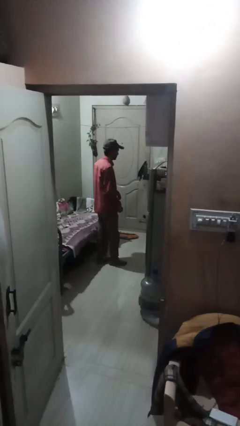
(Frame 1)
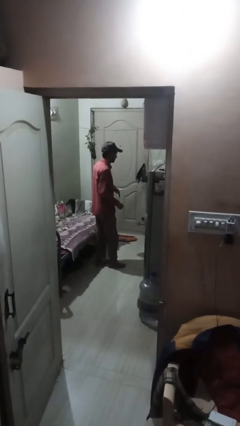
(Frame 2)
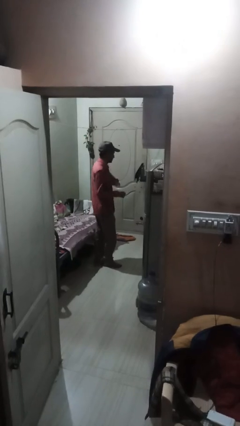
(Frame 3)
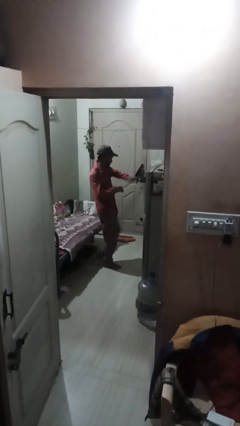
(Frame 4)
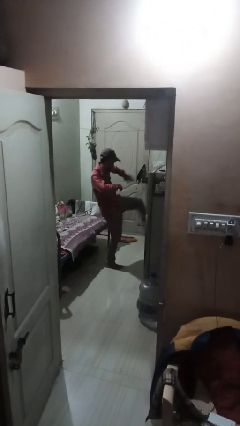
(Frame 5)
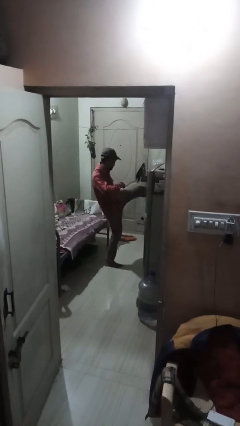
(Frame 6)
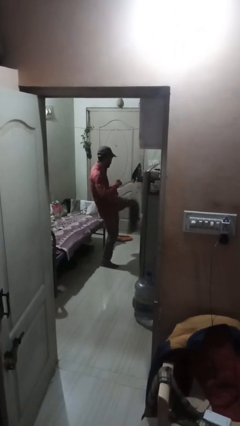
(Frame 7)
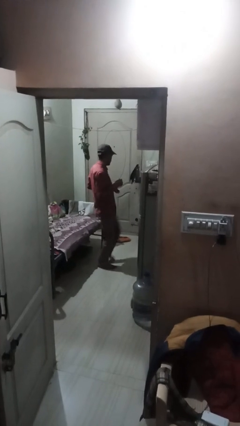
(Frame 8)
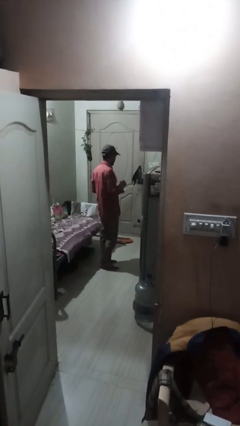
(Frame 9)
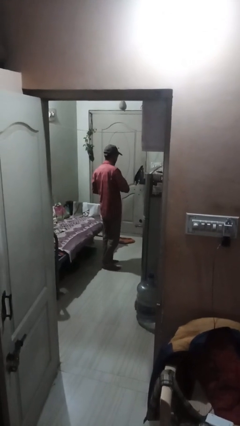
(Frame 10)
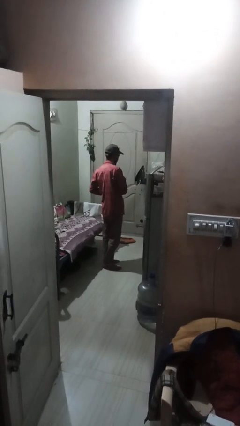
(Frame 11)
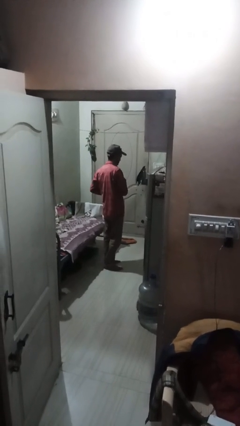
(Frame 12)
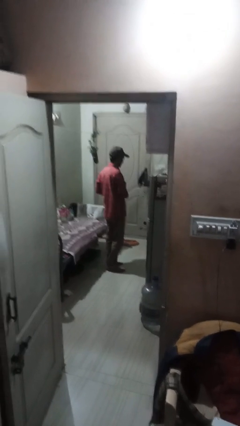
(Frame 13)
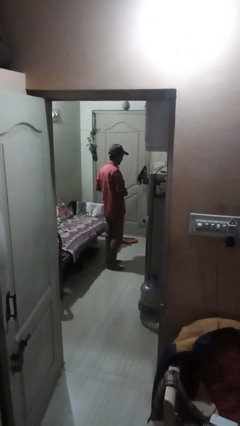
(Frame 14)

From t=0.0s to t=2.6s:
person karate kicks

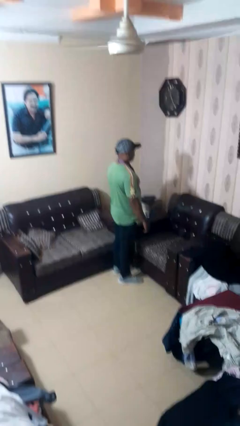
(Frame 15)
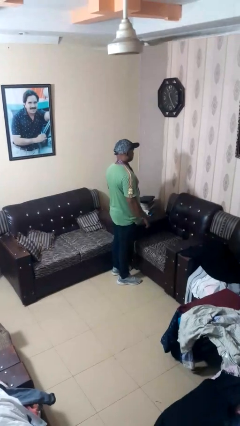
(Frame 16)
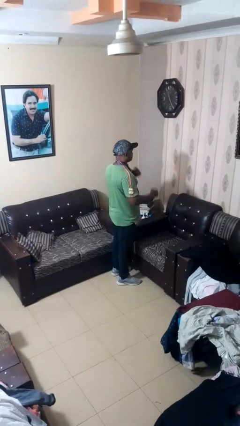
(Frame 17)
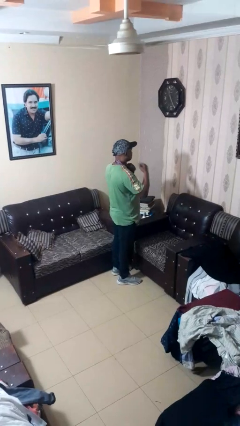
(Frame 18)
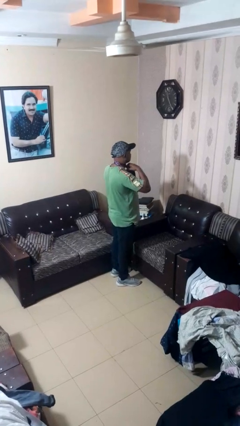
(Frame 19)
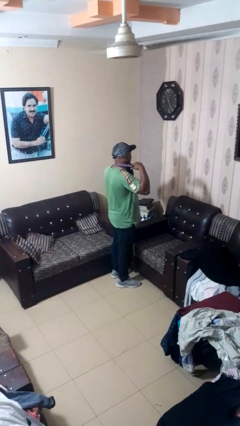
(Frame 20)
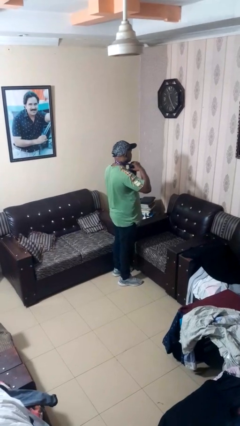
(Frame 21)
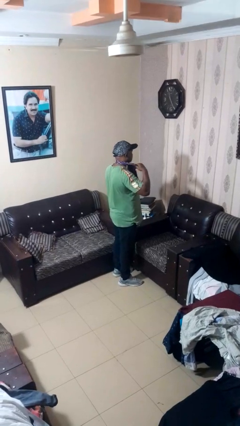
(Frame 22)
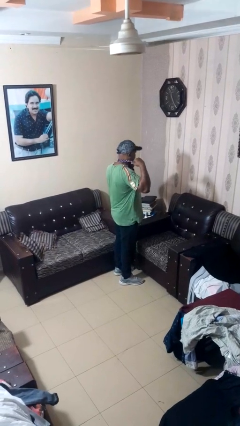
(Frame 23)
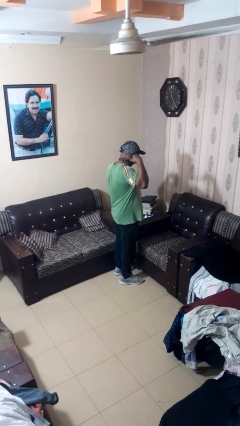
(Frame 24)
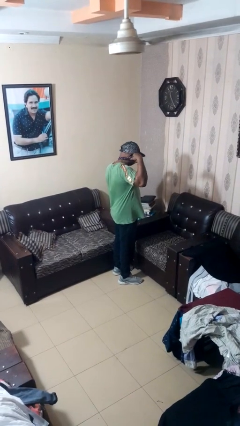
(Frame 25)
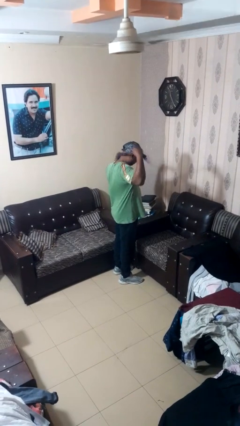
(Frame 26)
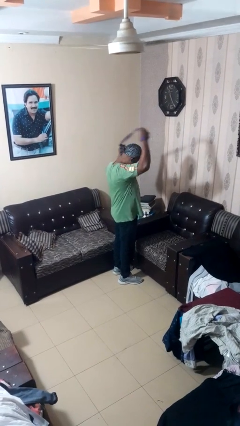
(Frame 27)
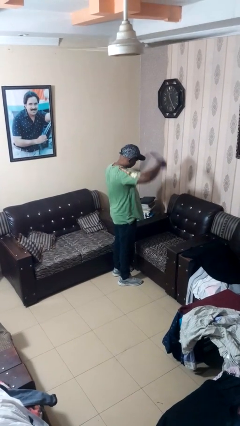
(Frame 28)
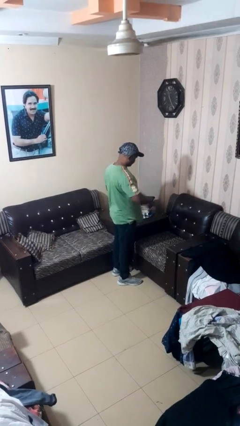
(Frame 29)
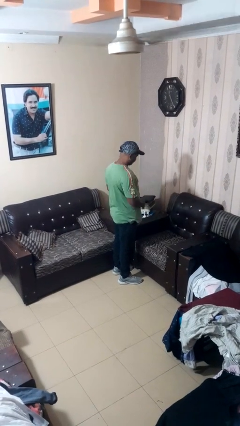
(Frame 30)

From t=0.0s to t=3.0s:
person takes off necktie

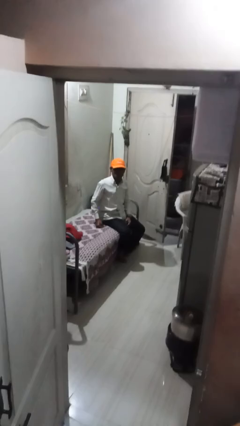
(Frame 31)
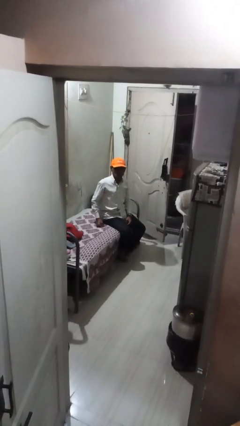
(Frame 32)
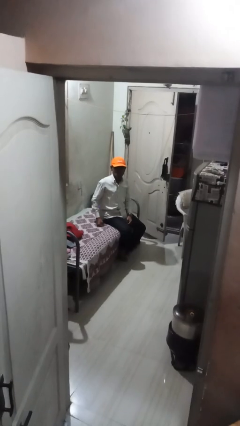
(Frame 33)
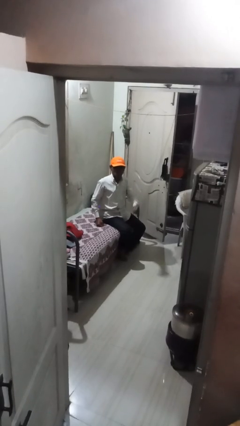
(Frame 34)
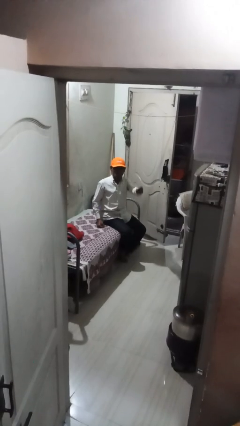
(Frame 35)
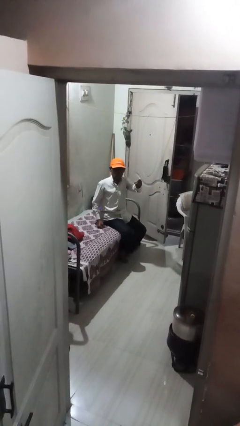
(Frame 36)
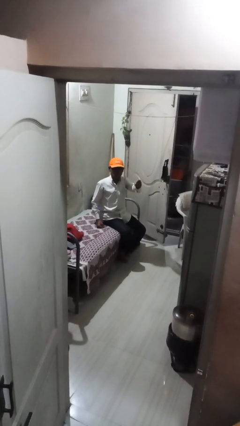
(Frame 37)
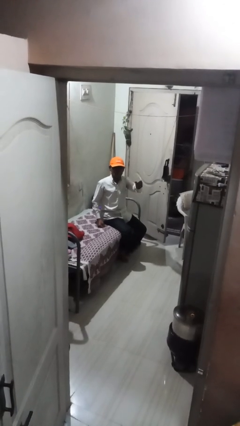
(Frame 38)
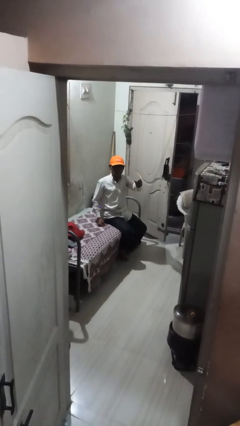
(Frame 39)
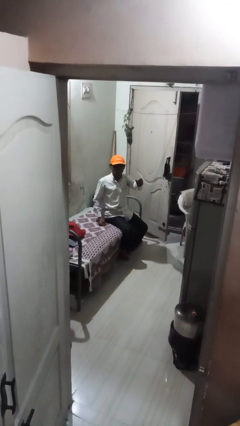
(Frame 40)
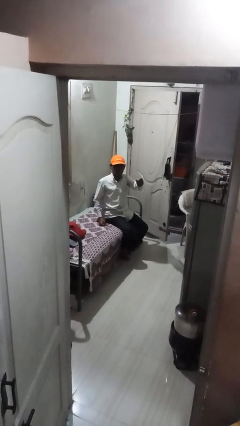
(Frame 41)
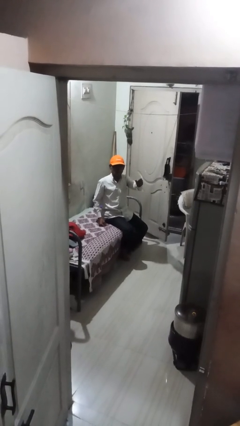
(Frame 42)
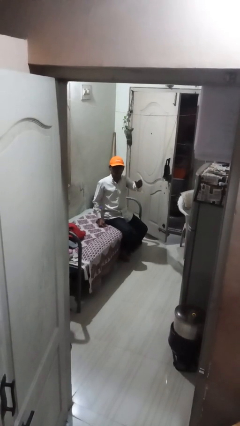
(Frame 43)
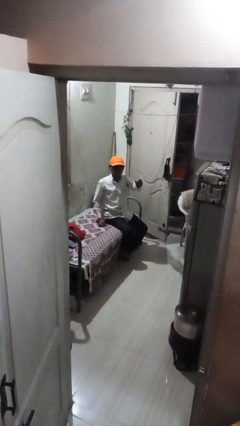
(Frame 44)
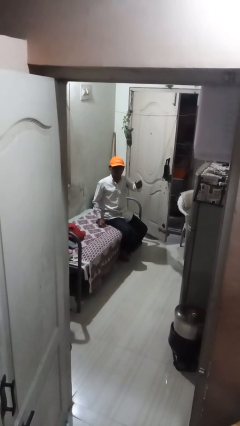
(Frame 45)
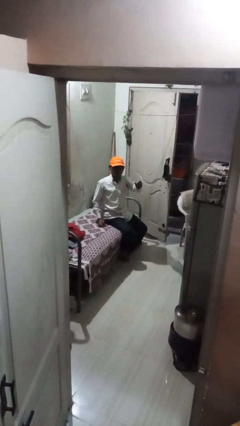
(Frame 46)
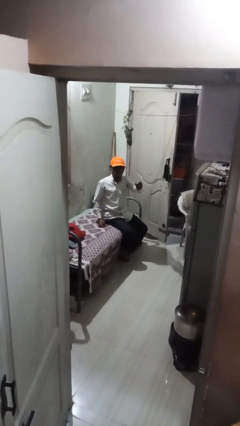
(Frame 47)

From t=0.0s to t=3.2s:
person snaps fingers

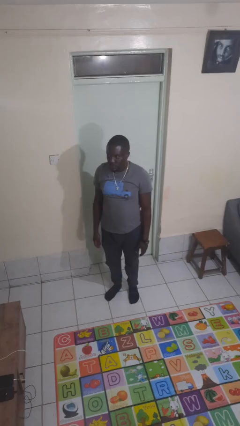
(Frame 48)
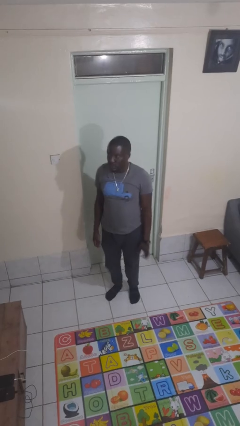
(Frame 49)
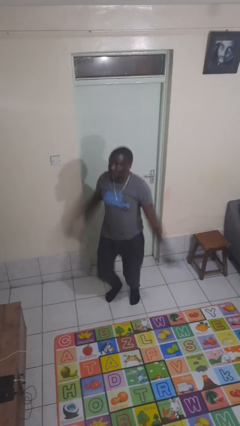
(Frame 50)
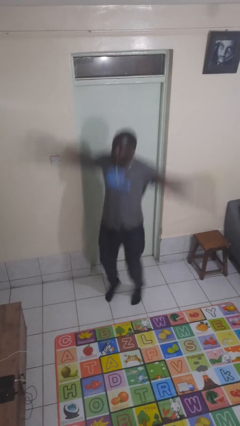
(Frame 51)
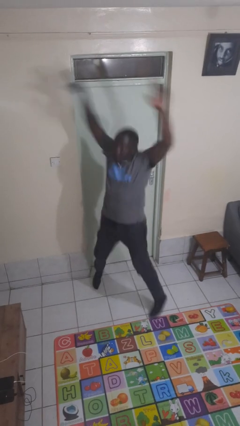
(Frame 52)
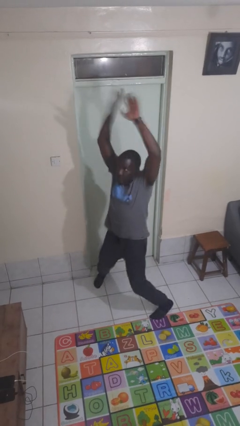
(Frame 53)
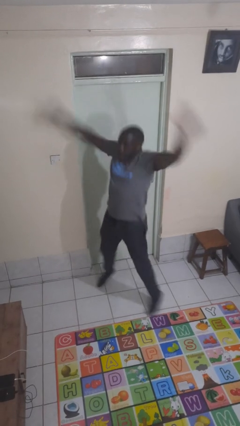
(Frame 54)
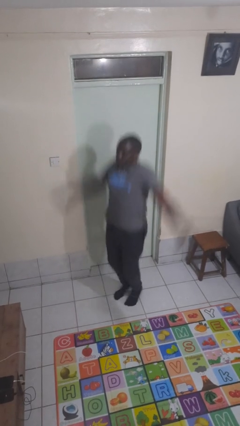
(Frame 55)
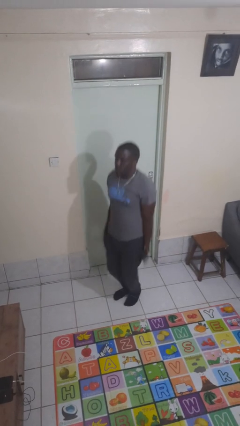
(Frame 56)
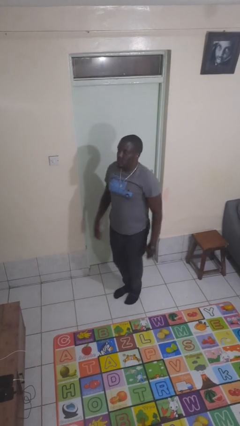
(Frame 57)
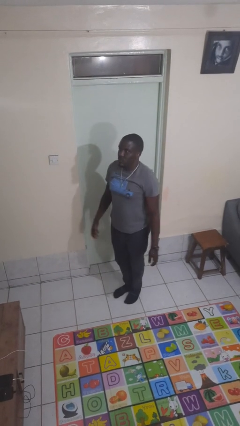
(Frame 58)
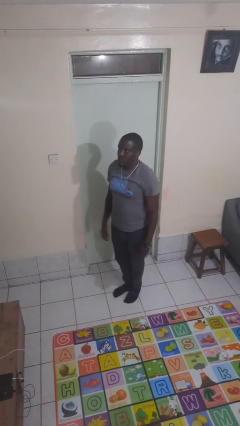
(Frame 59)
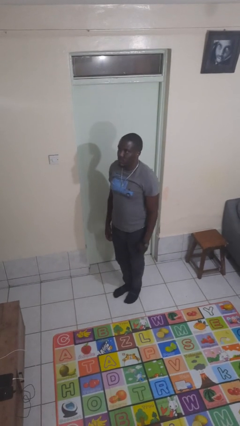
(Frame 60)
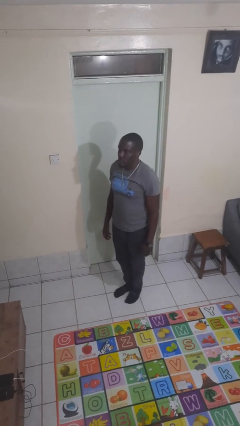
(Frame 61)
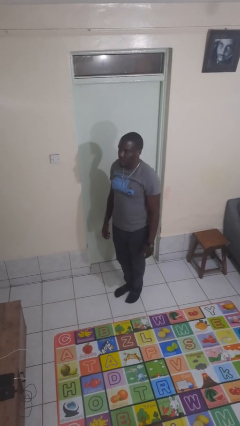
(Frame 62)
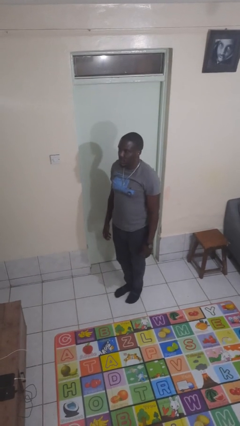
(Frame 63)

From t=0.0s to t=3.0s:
person exercises with jumping jacks

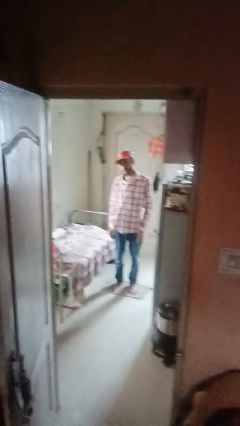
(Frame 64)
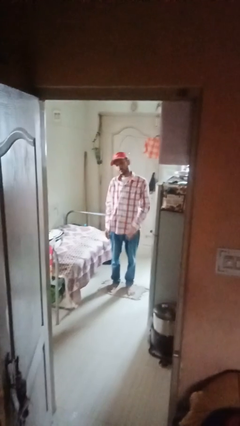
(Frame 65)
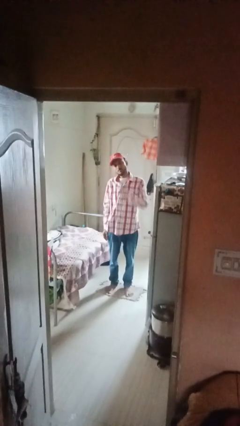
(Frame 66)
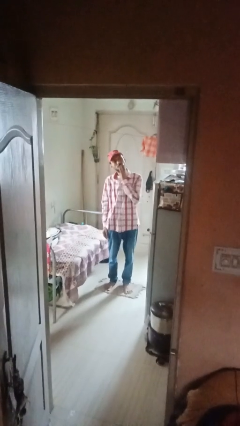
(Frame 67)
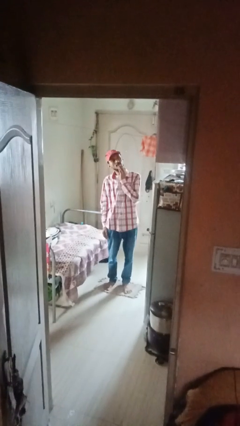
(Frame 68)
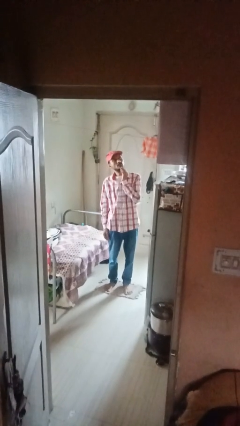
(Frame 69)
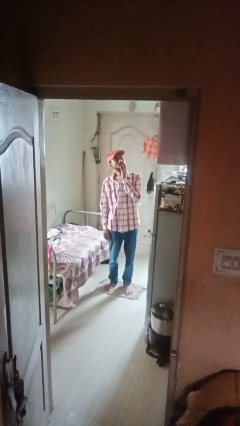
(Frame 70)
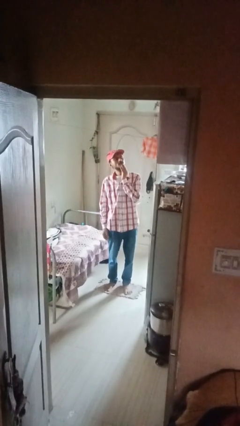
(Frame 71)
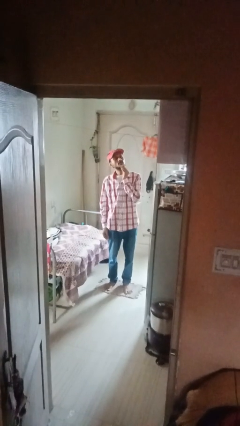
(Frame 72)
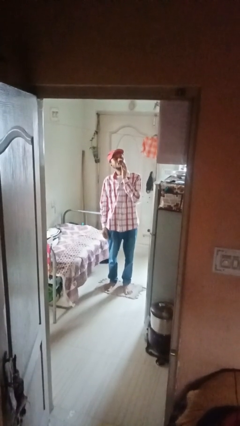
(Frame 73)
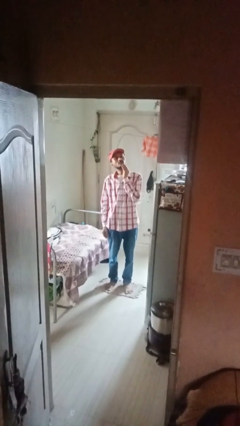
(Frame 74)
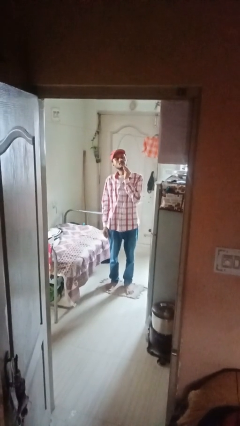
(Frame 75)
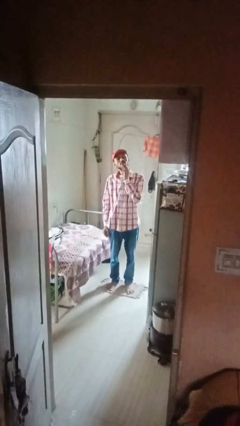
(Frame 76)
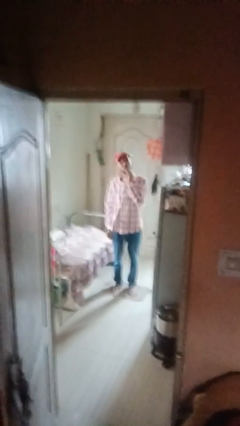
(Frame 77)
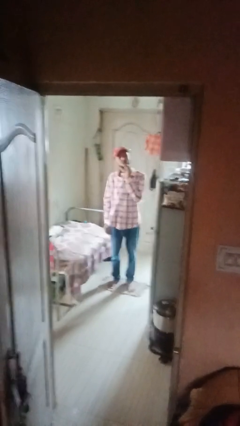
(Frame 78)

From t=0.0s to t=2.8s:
person strokes chin

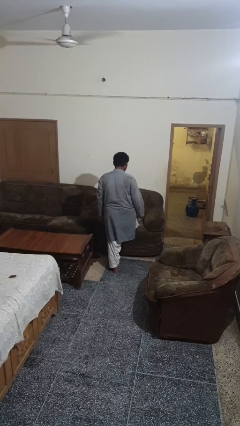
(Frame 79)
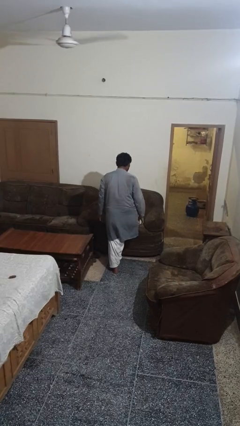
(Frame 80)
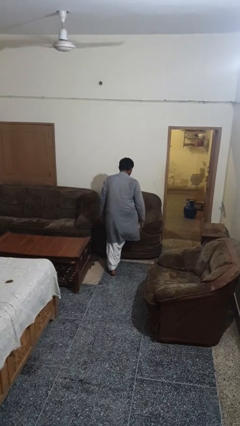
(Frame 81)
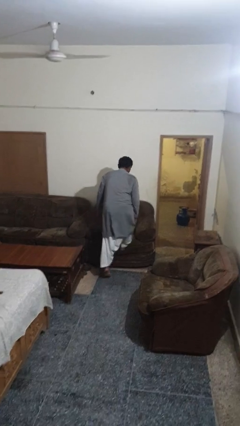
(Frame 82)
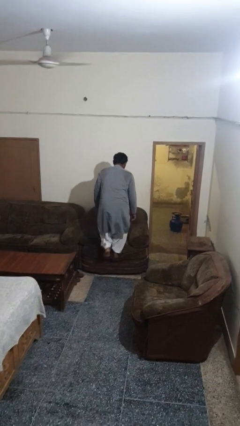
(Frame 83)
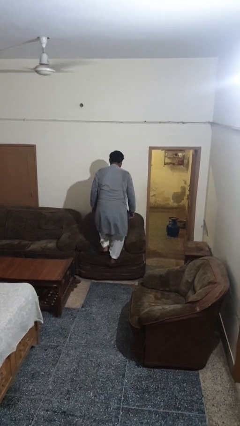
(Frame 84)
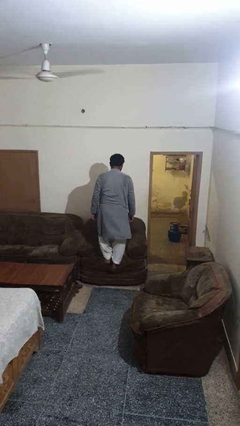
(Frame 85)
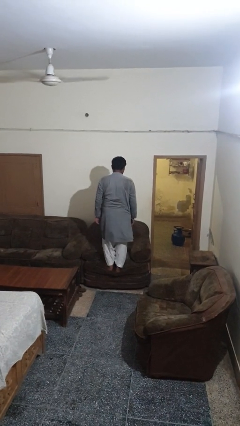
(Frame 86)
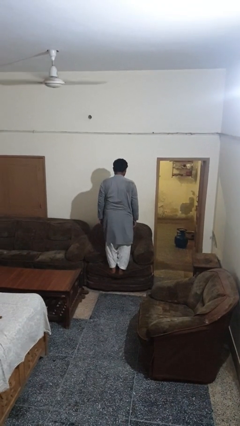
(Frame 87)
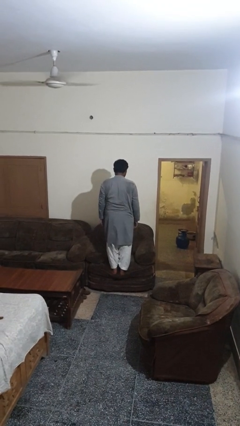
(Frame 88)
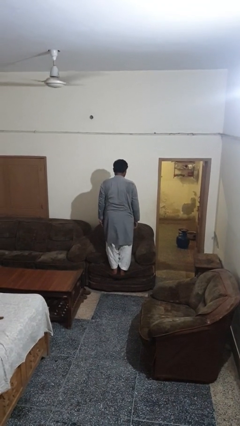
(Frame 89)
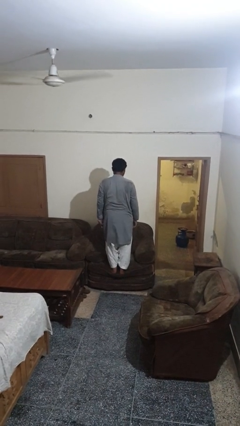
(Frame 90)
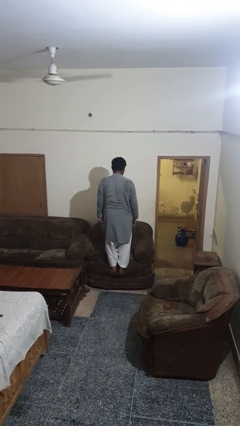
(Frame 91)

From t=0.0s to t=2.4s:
person climbs on couch

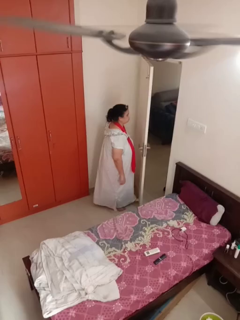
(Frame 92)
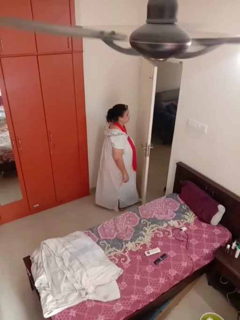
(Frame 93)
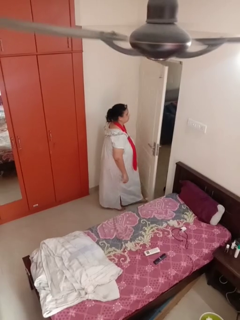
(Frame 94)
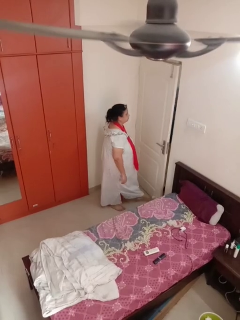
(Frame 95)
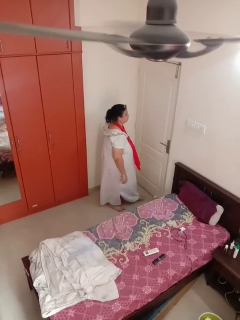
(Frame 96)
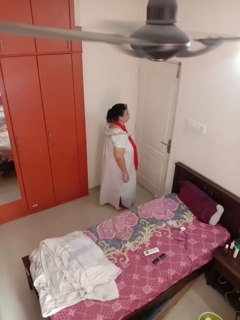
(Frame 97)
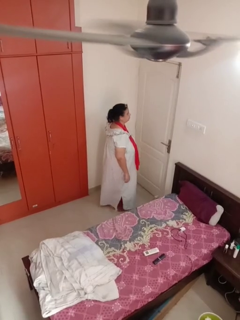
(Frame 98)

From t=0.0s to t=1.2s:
person closes door with foot
